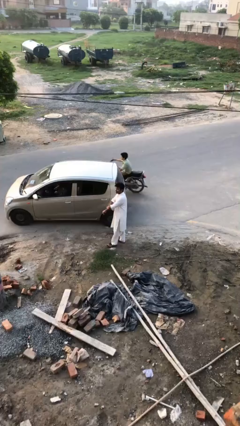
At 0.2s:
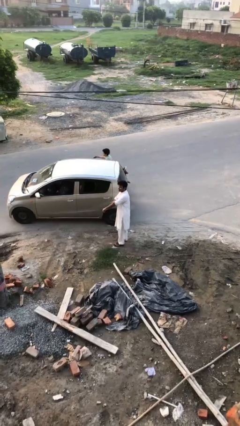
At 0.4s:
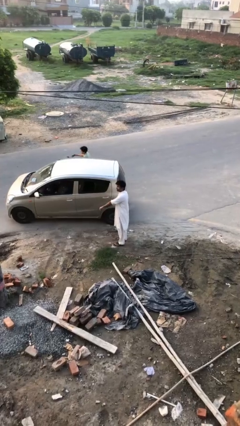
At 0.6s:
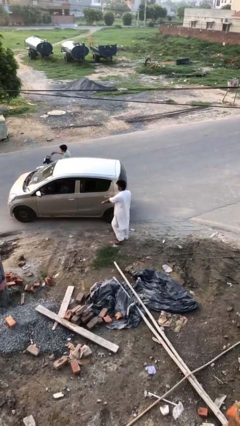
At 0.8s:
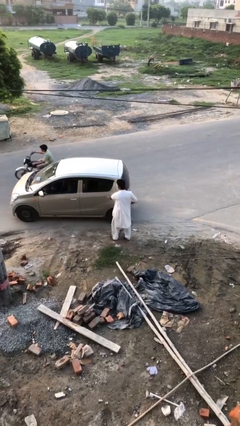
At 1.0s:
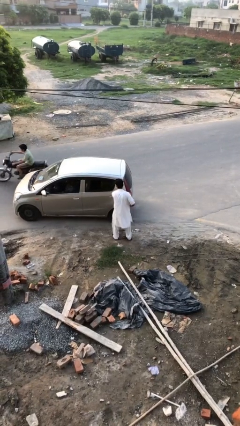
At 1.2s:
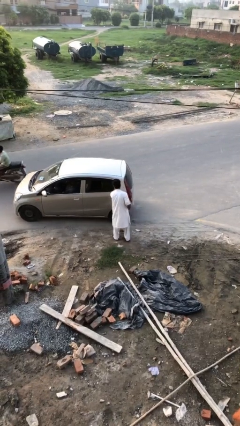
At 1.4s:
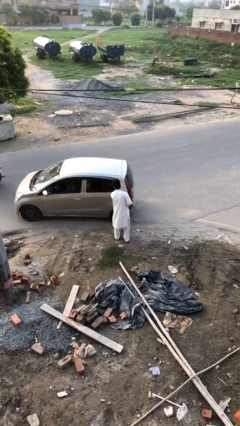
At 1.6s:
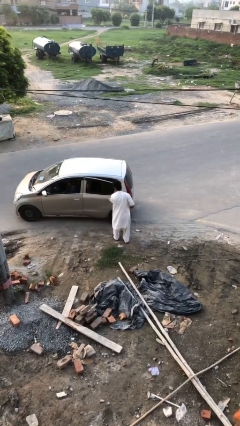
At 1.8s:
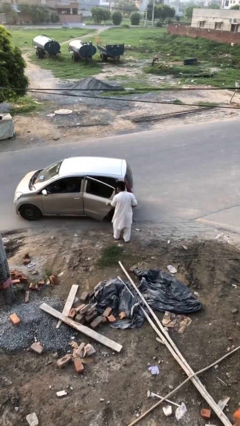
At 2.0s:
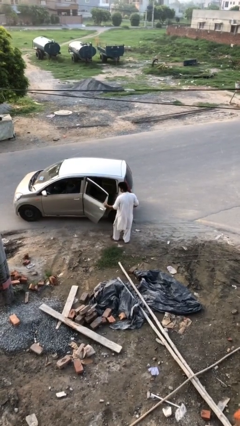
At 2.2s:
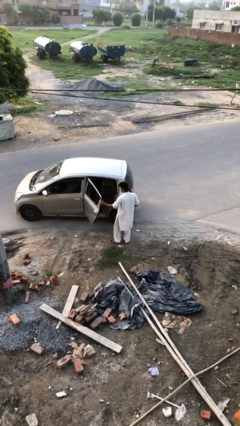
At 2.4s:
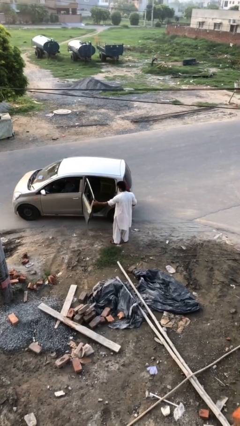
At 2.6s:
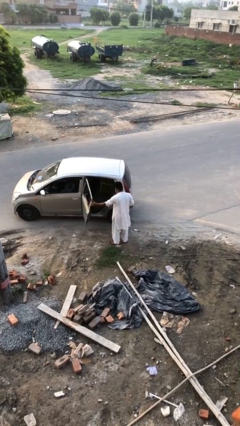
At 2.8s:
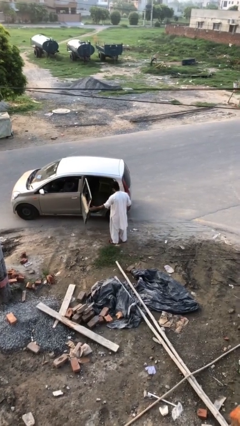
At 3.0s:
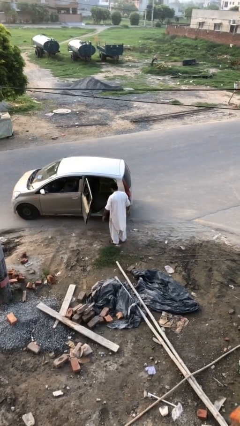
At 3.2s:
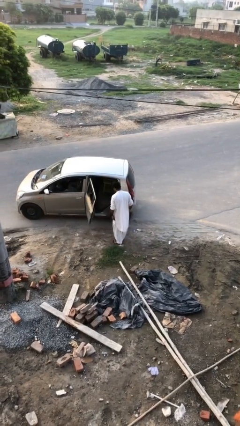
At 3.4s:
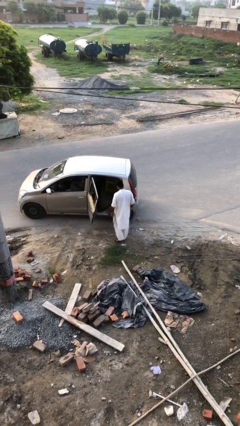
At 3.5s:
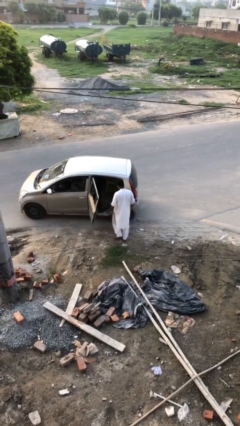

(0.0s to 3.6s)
person opens car door

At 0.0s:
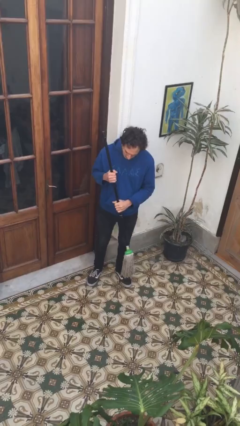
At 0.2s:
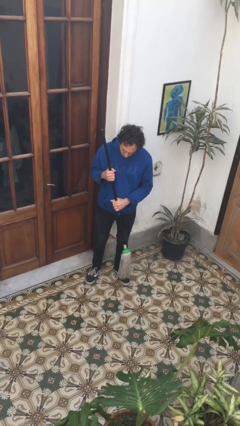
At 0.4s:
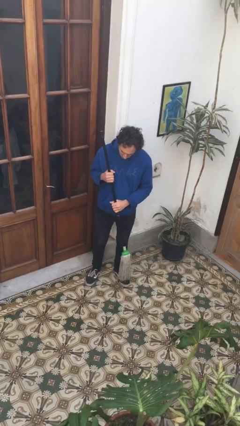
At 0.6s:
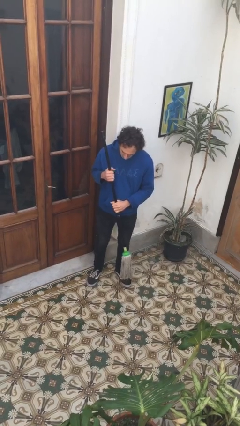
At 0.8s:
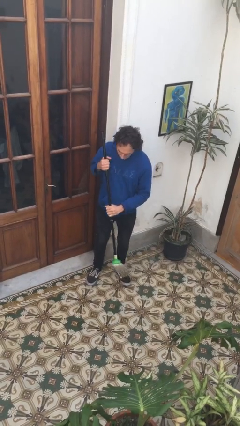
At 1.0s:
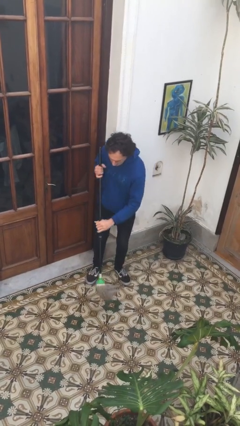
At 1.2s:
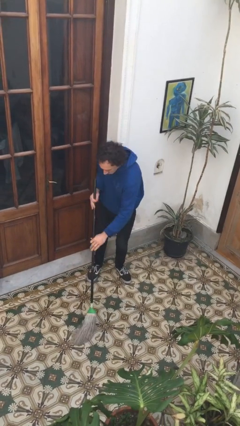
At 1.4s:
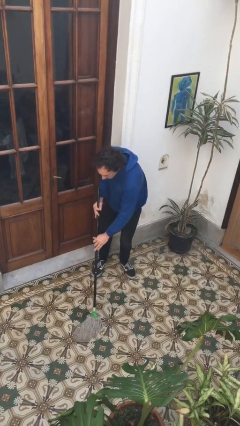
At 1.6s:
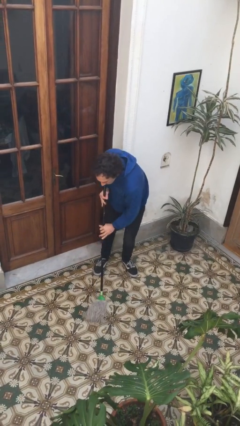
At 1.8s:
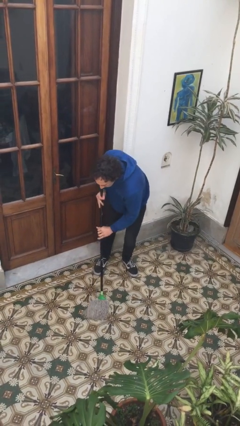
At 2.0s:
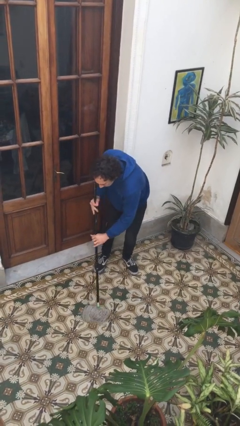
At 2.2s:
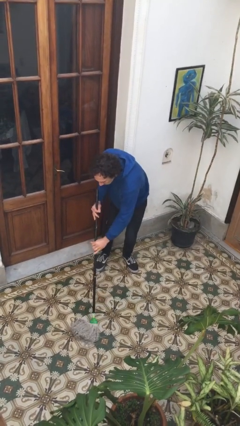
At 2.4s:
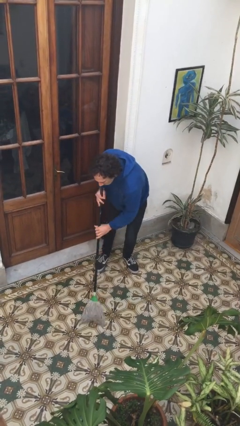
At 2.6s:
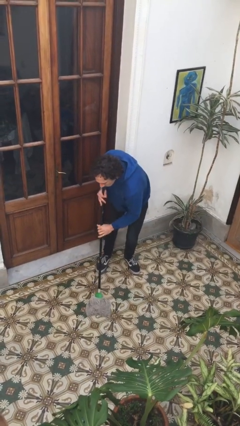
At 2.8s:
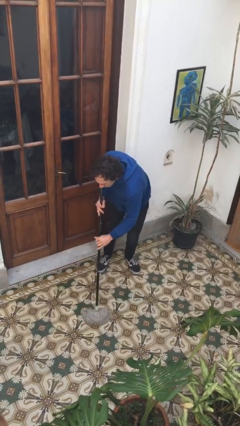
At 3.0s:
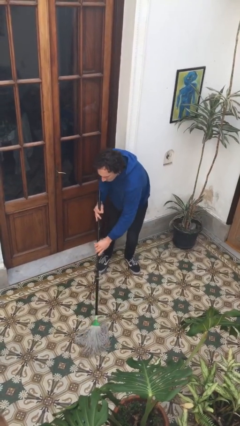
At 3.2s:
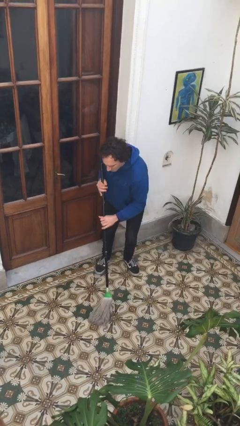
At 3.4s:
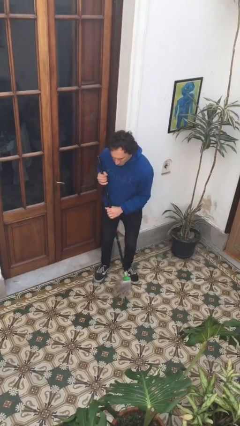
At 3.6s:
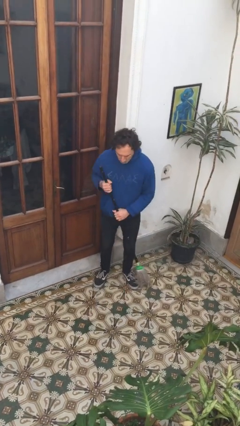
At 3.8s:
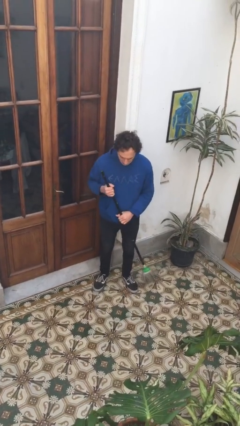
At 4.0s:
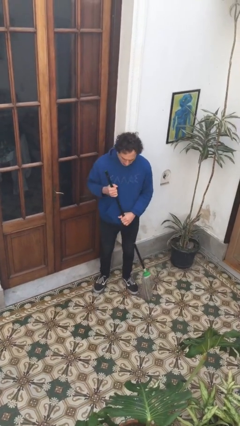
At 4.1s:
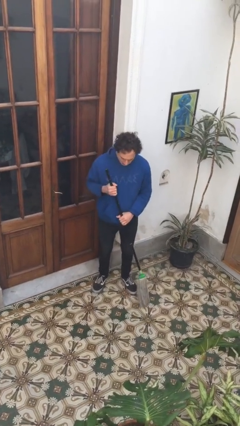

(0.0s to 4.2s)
person mops

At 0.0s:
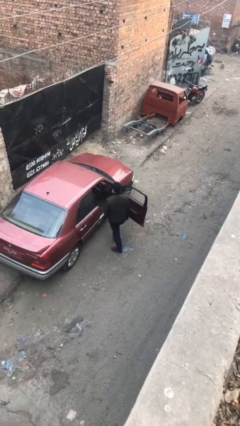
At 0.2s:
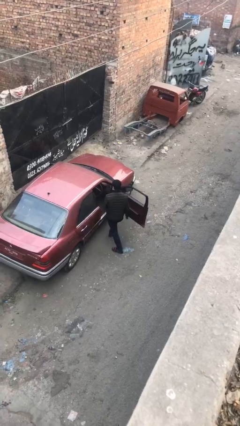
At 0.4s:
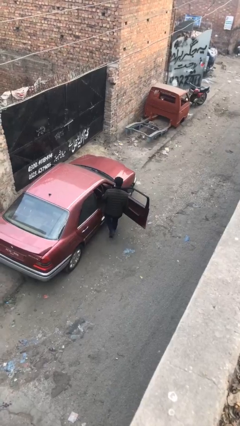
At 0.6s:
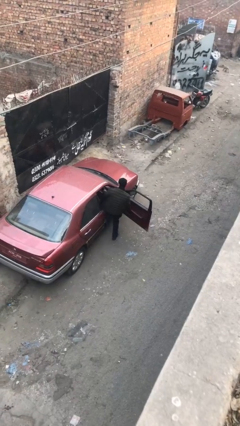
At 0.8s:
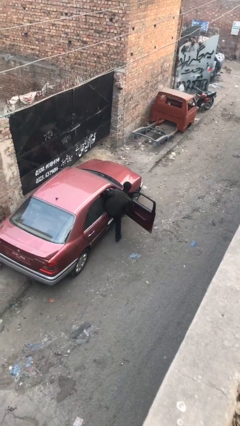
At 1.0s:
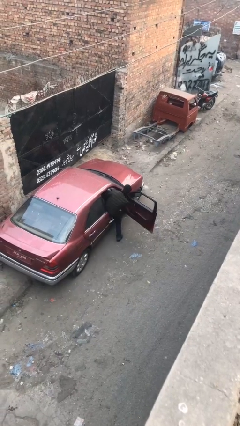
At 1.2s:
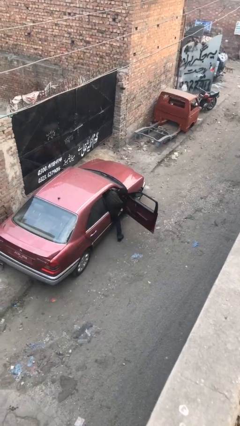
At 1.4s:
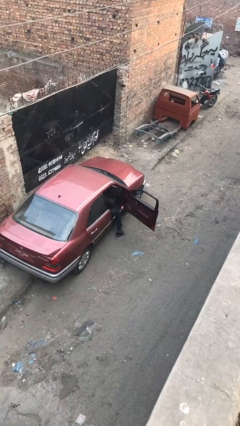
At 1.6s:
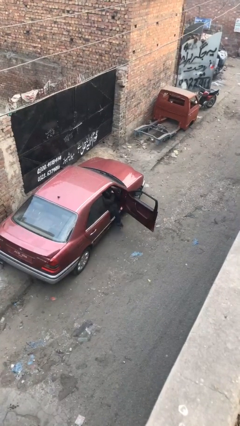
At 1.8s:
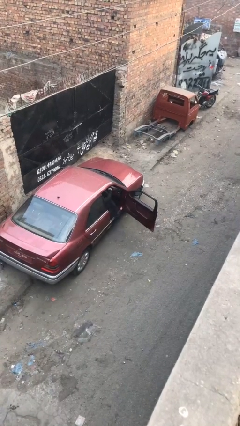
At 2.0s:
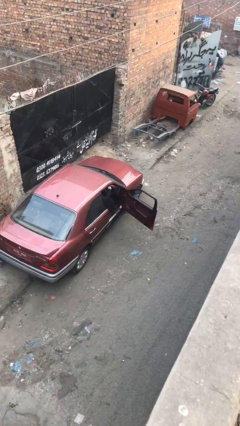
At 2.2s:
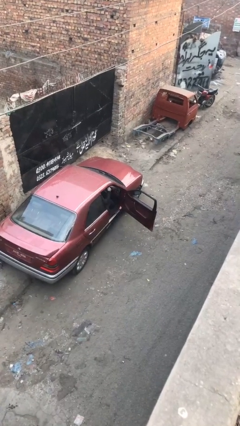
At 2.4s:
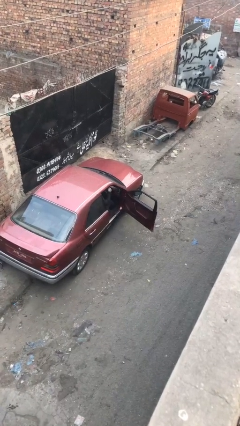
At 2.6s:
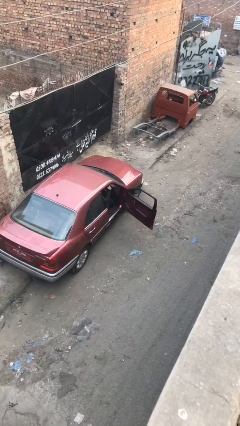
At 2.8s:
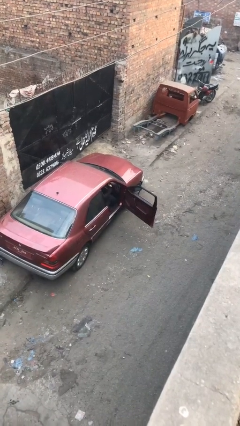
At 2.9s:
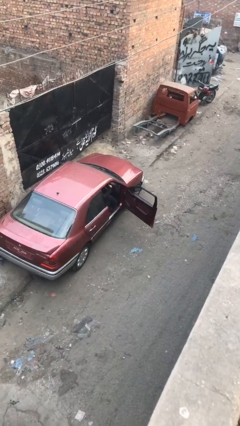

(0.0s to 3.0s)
person enters car

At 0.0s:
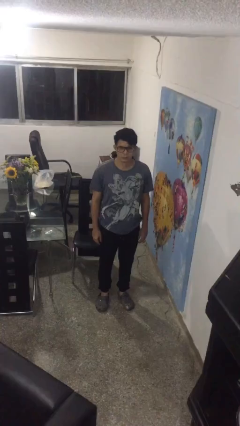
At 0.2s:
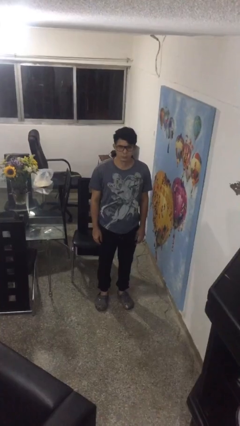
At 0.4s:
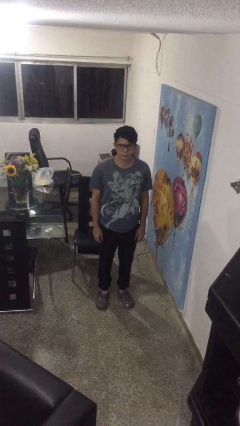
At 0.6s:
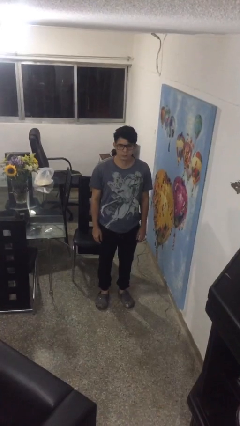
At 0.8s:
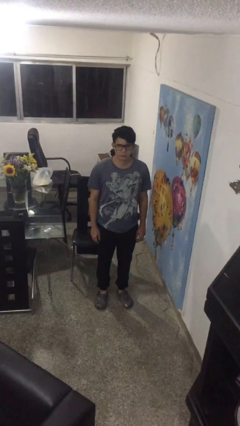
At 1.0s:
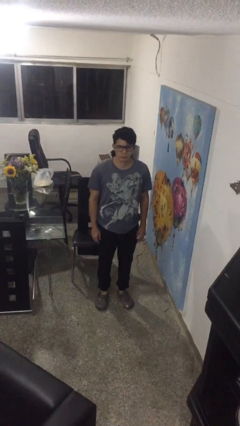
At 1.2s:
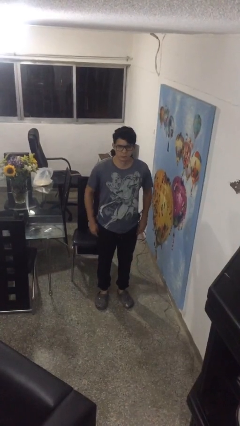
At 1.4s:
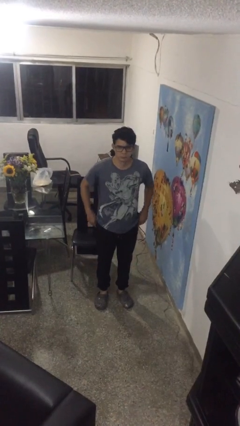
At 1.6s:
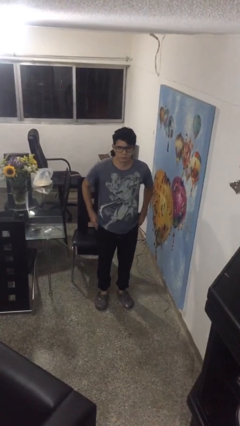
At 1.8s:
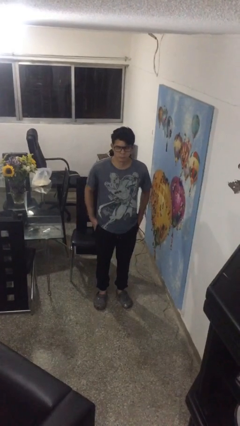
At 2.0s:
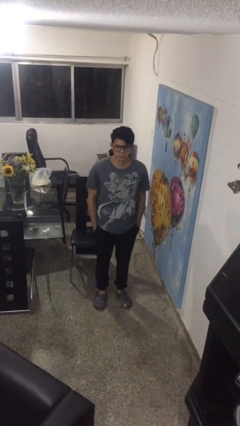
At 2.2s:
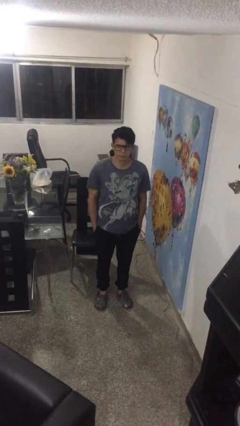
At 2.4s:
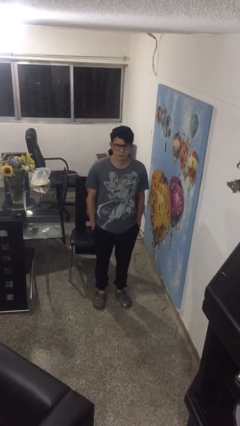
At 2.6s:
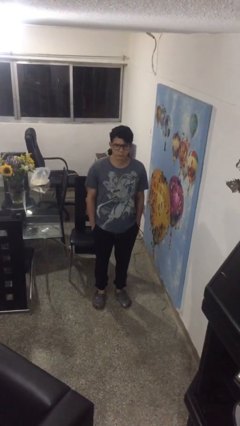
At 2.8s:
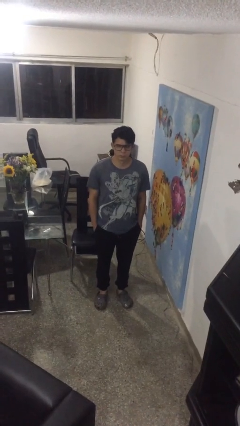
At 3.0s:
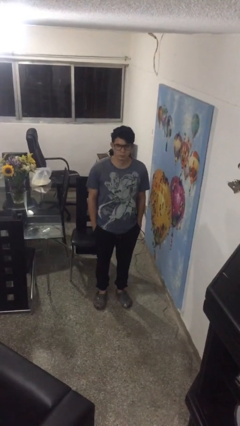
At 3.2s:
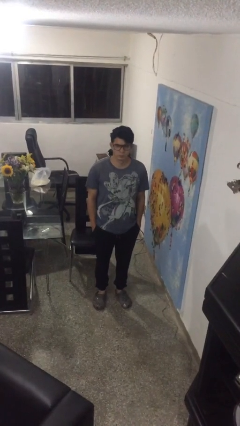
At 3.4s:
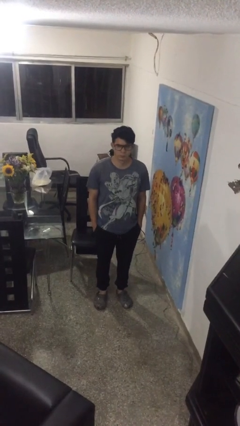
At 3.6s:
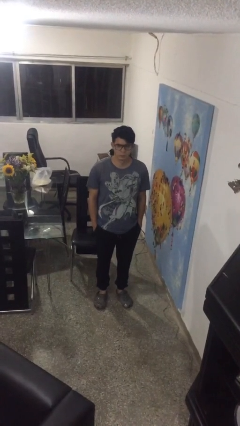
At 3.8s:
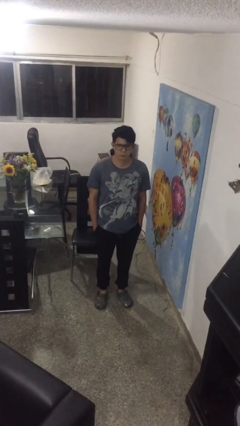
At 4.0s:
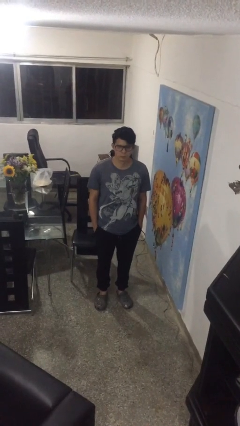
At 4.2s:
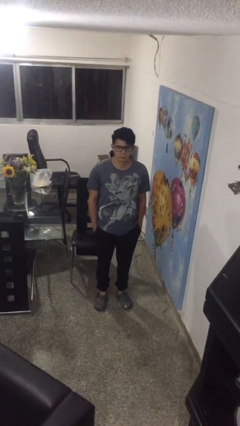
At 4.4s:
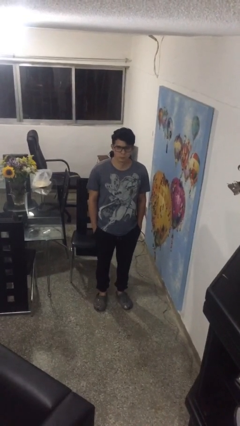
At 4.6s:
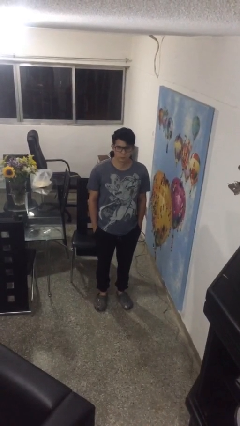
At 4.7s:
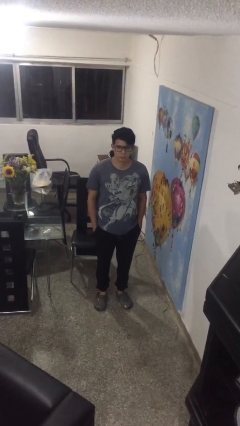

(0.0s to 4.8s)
person puts hands in back pockets

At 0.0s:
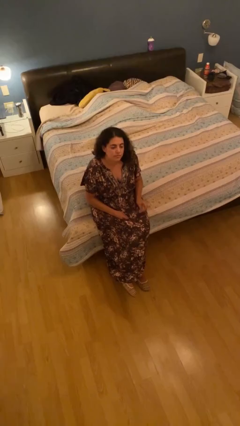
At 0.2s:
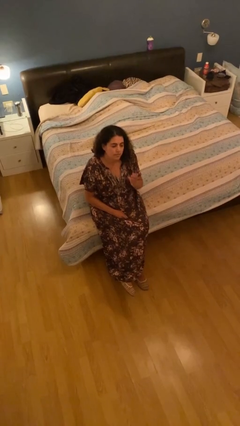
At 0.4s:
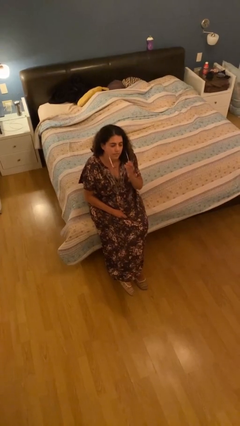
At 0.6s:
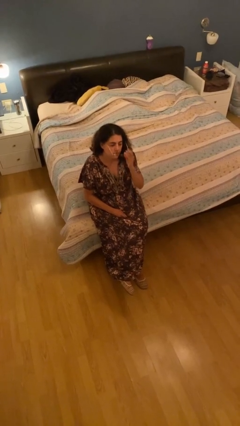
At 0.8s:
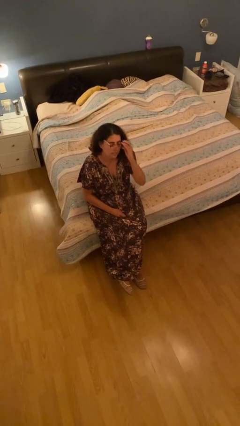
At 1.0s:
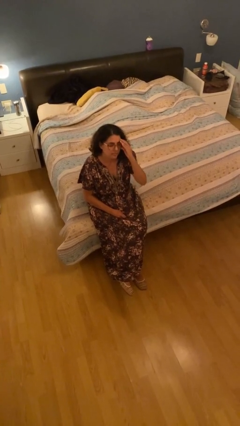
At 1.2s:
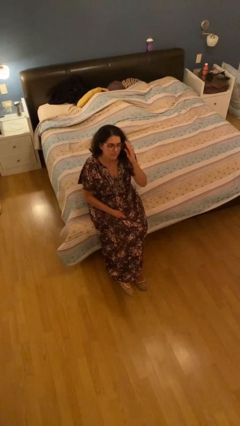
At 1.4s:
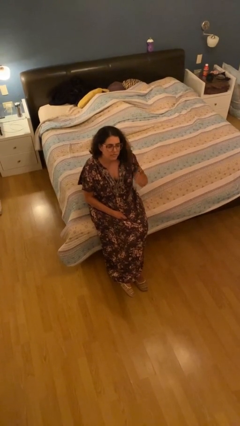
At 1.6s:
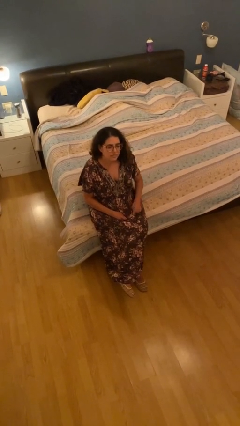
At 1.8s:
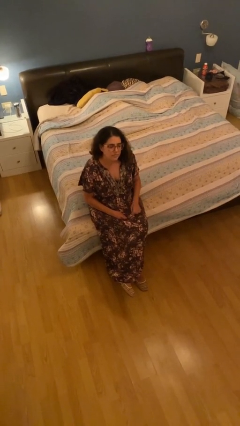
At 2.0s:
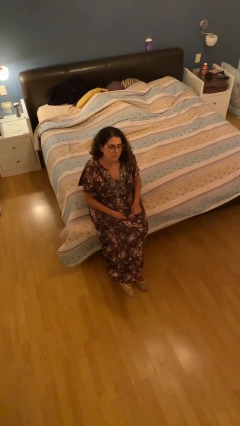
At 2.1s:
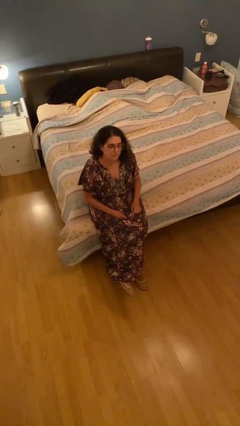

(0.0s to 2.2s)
person puts on glasses
